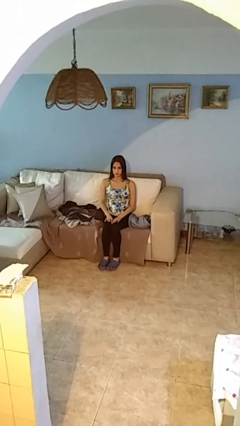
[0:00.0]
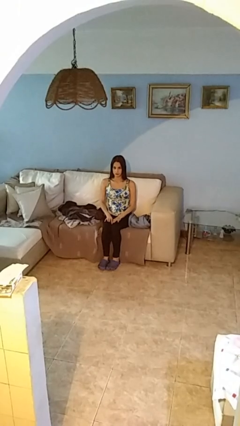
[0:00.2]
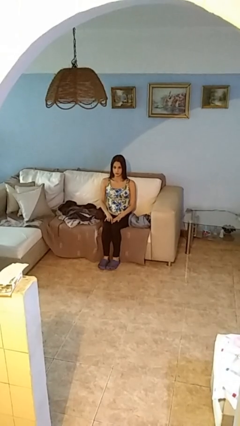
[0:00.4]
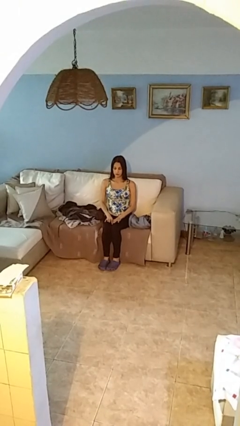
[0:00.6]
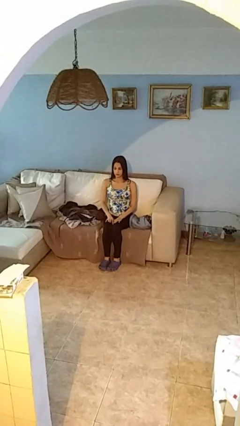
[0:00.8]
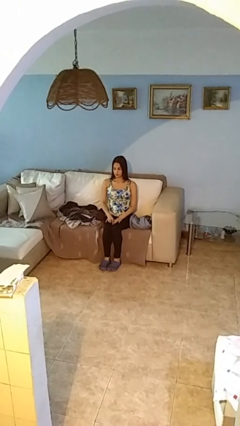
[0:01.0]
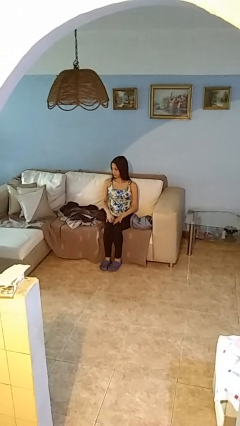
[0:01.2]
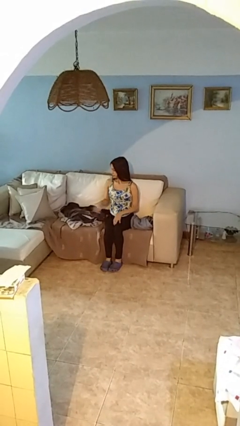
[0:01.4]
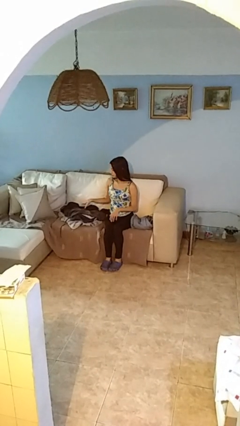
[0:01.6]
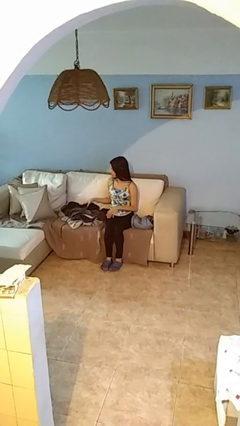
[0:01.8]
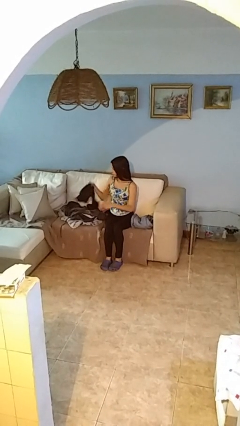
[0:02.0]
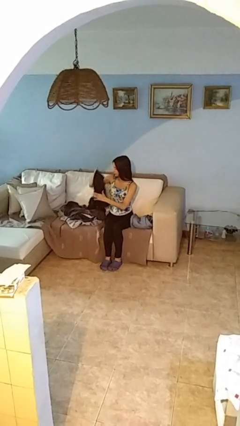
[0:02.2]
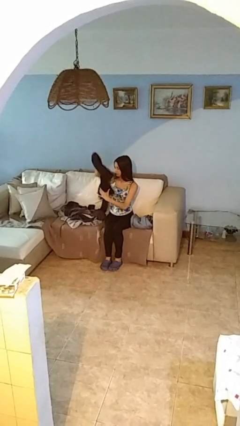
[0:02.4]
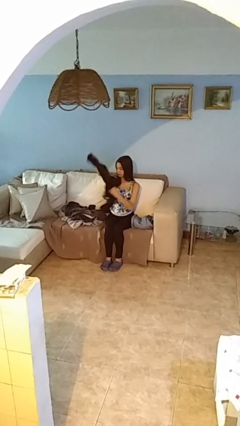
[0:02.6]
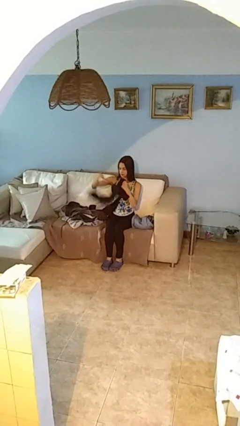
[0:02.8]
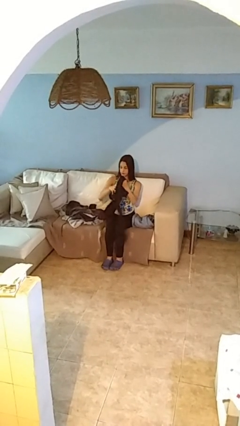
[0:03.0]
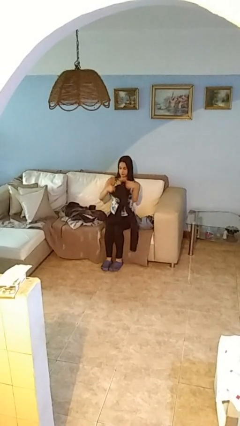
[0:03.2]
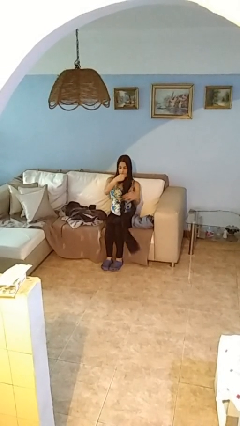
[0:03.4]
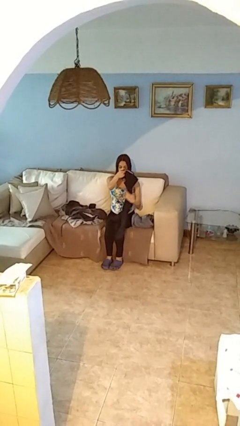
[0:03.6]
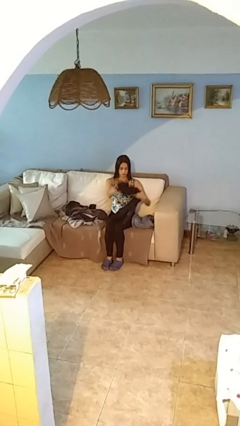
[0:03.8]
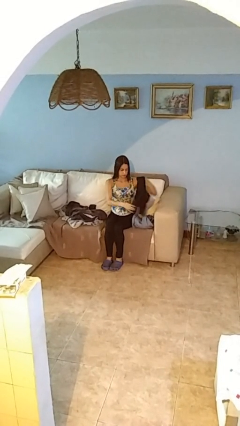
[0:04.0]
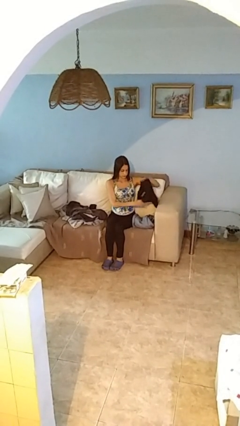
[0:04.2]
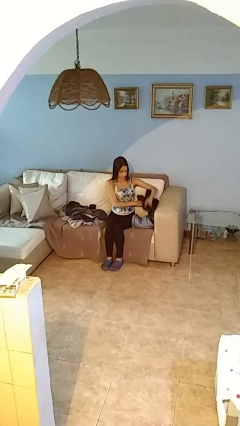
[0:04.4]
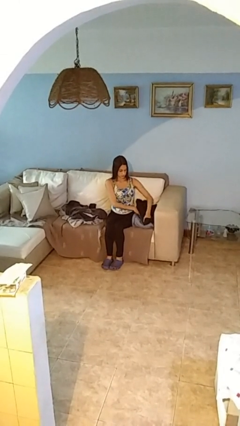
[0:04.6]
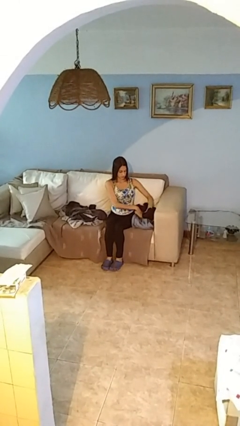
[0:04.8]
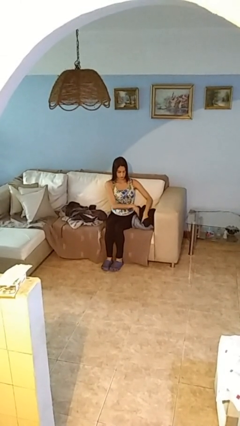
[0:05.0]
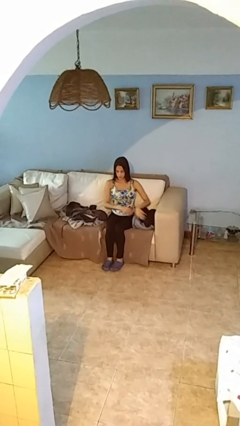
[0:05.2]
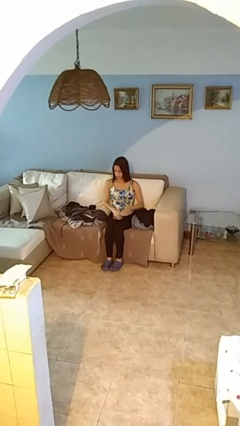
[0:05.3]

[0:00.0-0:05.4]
person folds pants

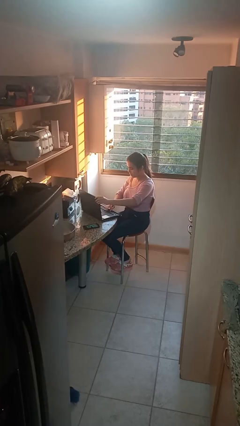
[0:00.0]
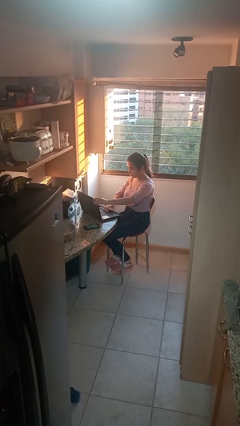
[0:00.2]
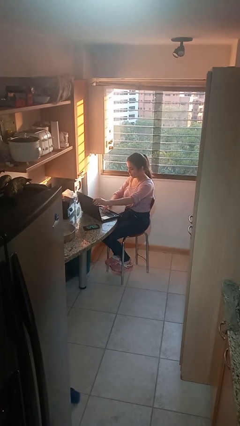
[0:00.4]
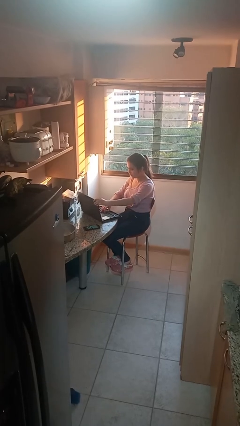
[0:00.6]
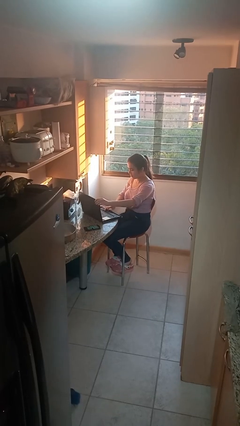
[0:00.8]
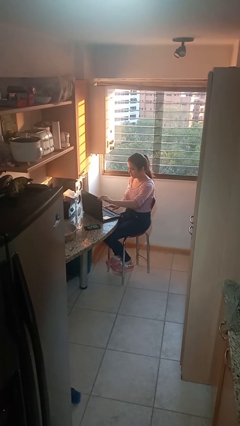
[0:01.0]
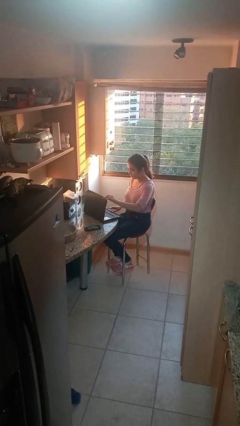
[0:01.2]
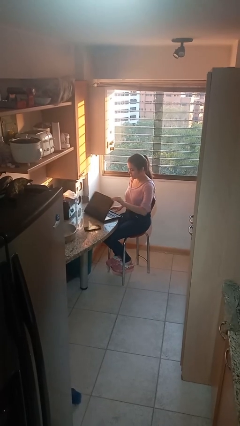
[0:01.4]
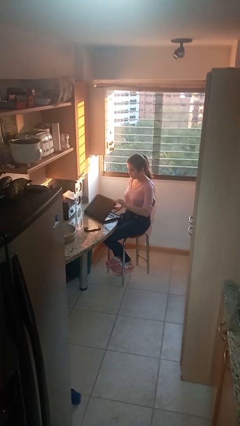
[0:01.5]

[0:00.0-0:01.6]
person interacts with laptop

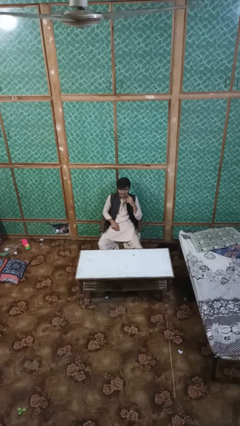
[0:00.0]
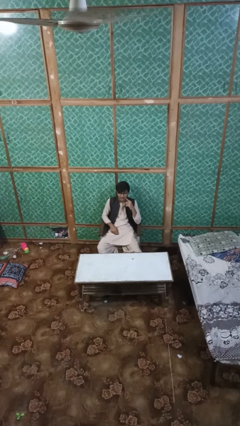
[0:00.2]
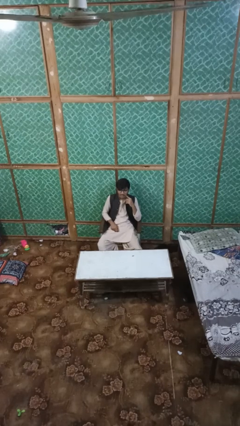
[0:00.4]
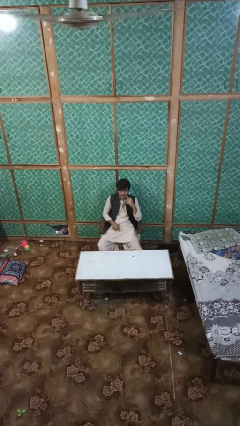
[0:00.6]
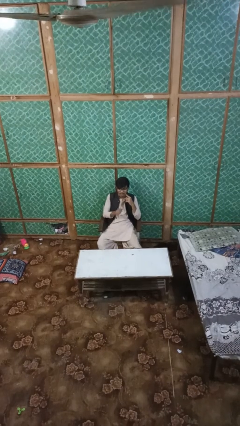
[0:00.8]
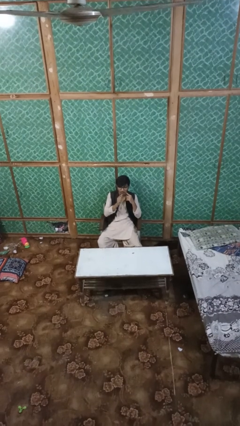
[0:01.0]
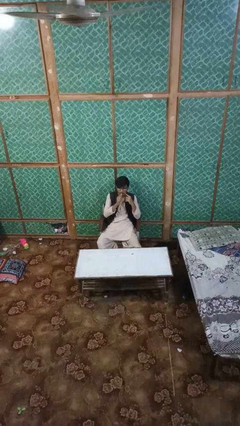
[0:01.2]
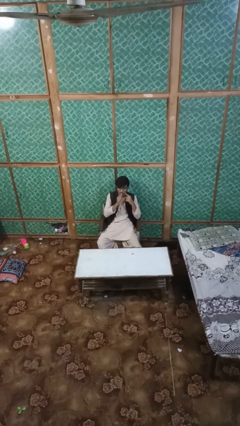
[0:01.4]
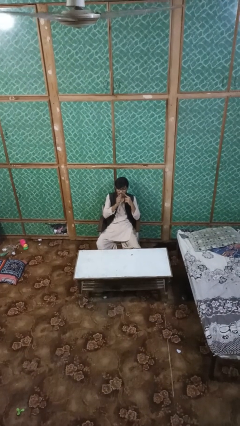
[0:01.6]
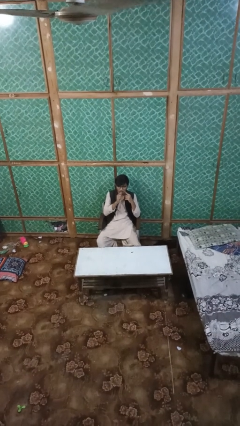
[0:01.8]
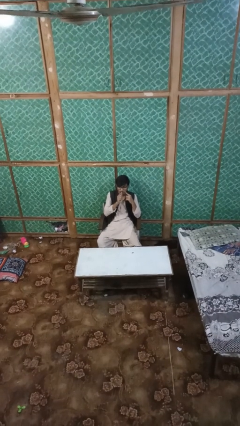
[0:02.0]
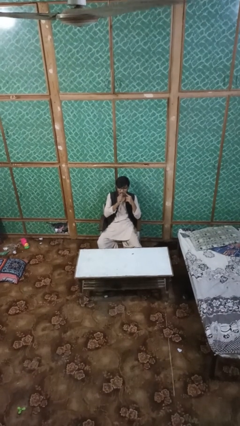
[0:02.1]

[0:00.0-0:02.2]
person vapes

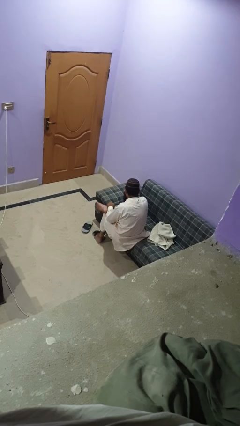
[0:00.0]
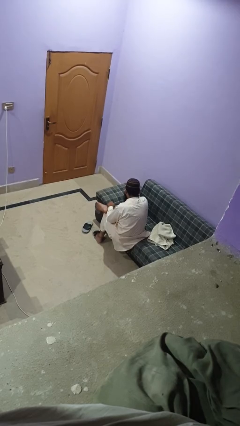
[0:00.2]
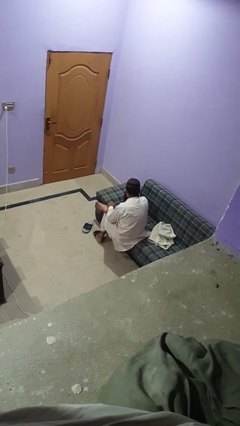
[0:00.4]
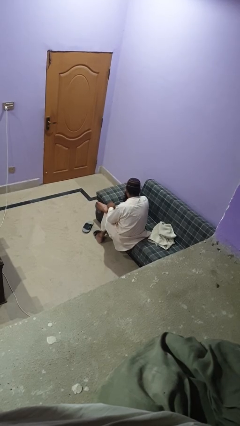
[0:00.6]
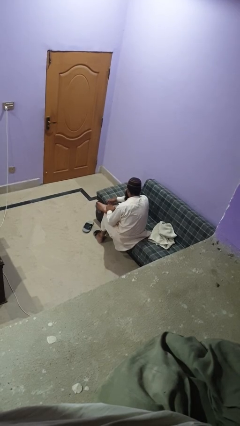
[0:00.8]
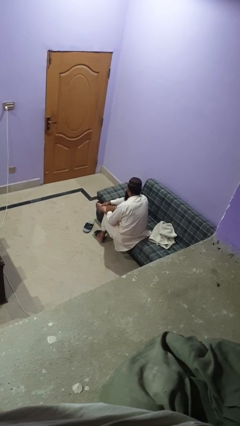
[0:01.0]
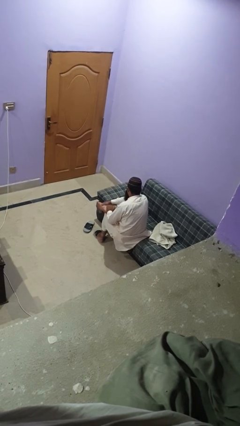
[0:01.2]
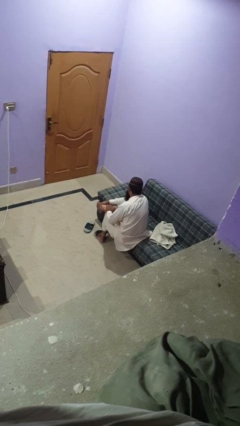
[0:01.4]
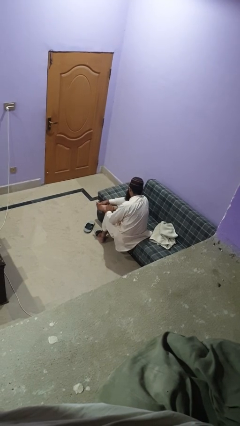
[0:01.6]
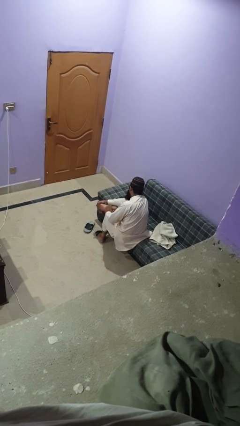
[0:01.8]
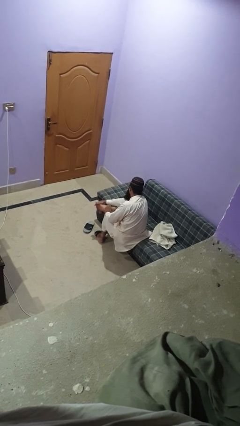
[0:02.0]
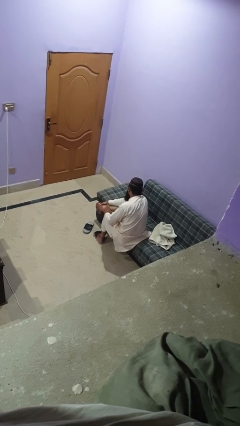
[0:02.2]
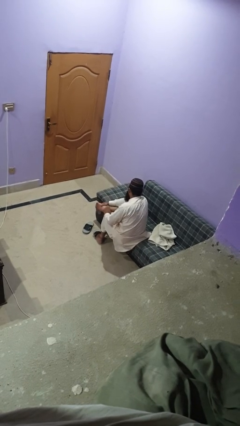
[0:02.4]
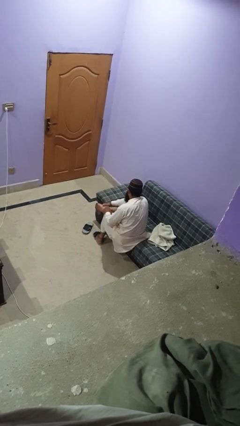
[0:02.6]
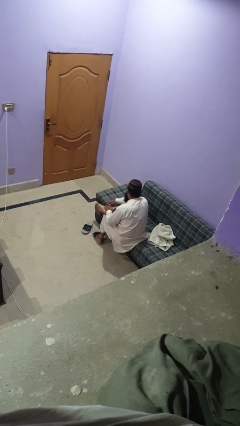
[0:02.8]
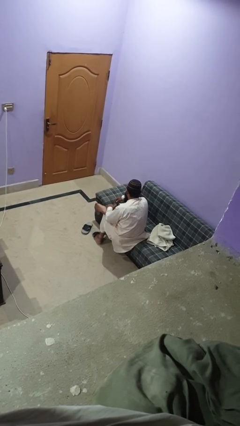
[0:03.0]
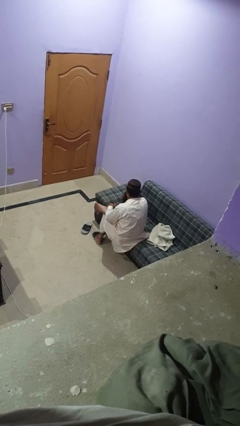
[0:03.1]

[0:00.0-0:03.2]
person rubs foot

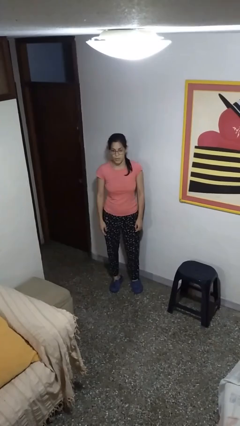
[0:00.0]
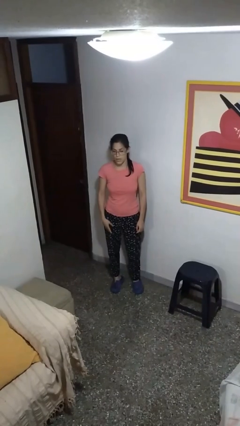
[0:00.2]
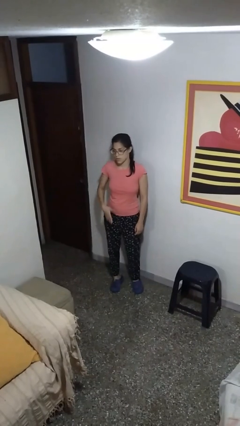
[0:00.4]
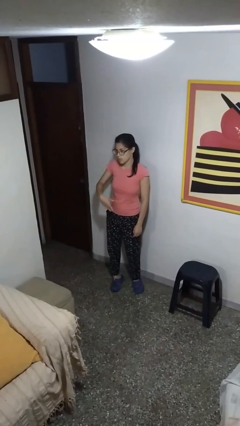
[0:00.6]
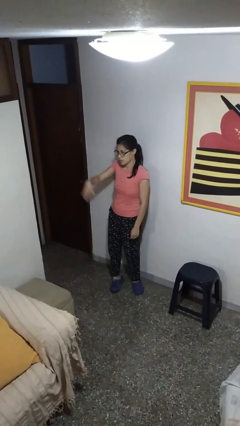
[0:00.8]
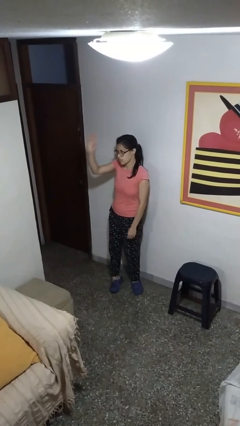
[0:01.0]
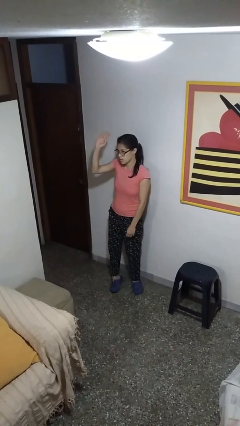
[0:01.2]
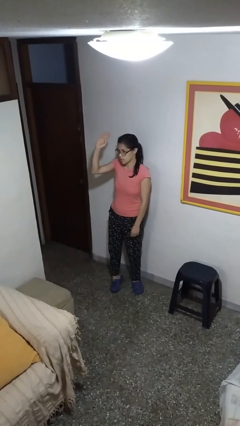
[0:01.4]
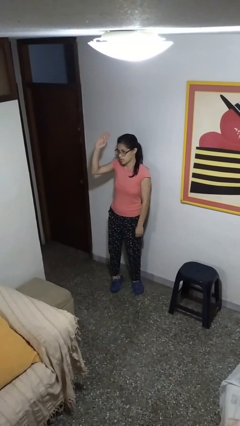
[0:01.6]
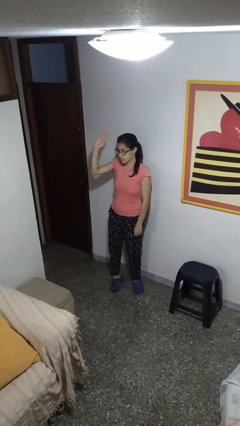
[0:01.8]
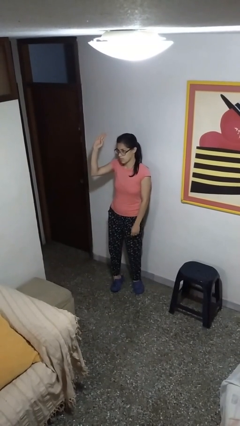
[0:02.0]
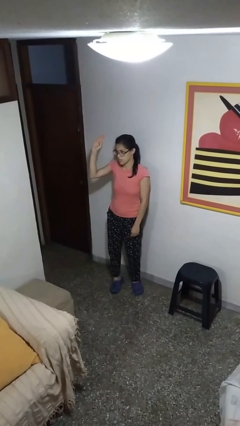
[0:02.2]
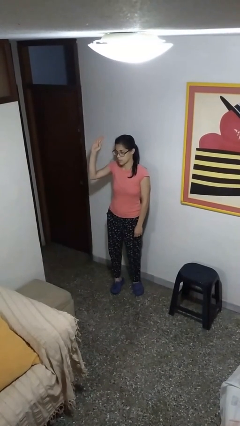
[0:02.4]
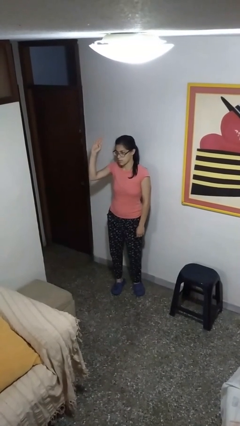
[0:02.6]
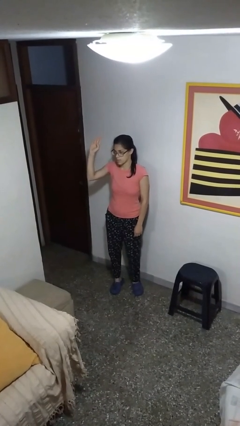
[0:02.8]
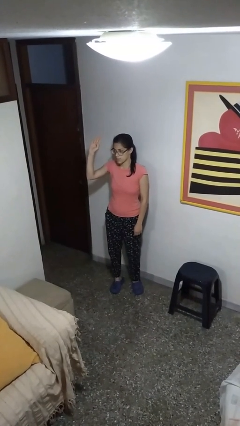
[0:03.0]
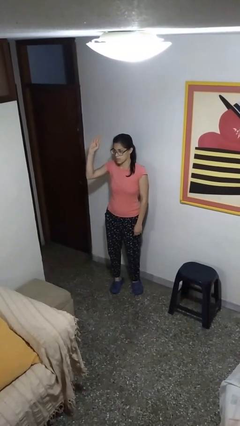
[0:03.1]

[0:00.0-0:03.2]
person gestures swipe up

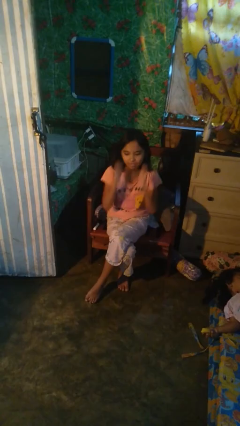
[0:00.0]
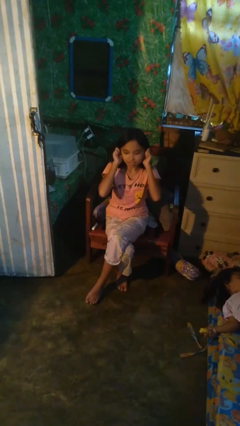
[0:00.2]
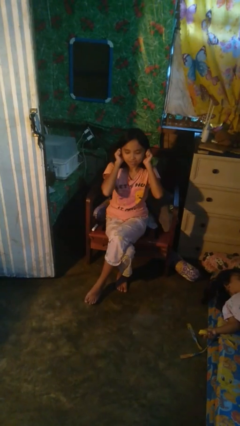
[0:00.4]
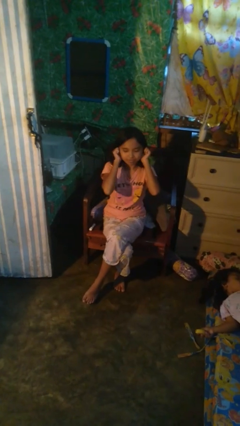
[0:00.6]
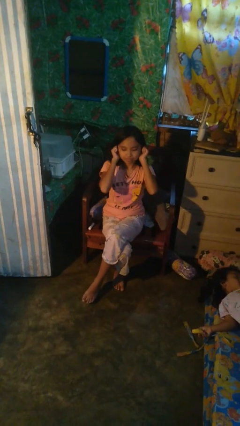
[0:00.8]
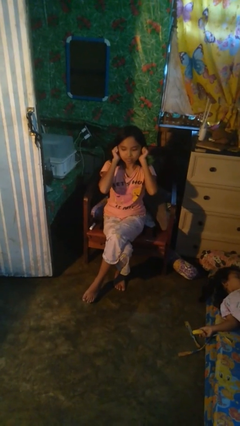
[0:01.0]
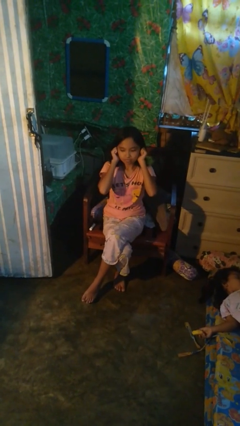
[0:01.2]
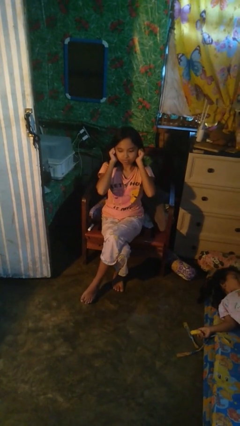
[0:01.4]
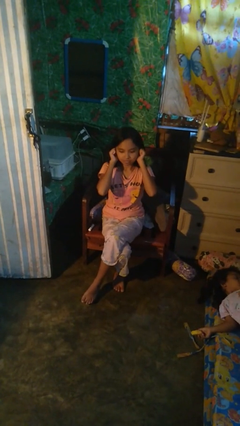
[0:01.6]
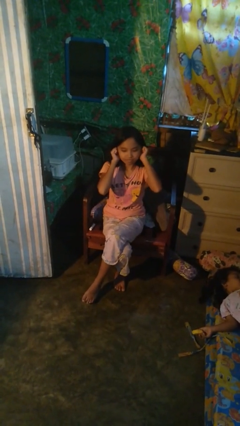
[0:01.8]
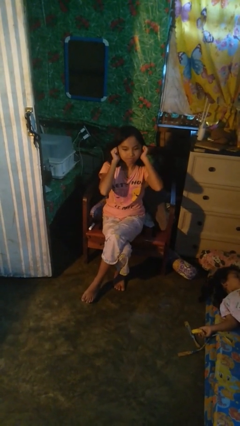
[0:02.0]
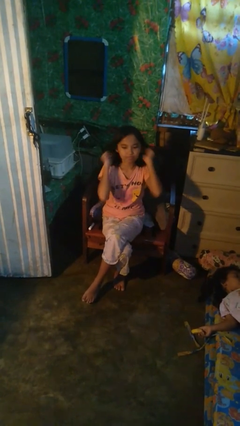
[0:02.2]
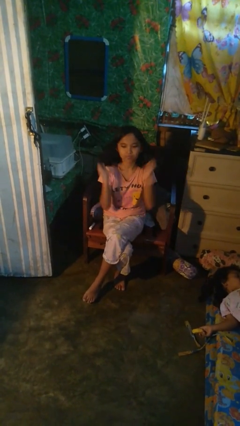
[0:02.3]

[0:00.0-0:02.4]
person puts fingers in ear
